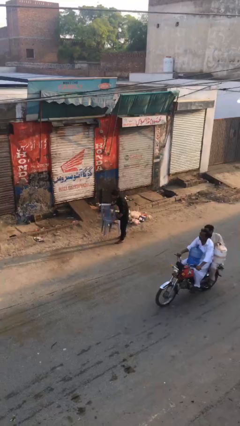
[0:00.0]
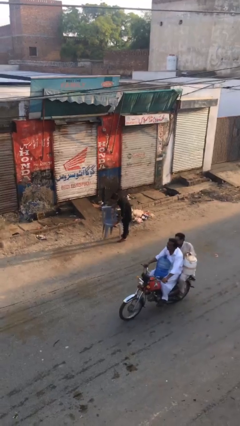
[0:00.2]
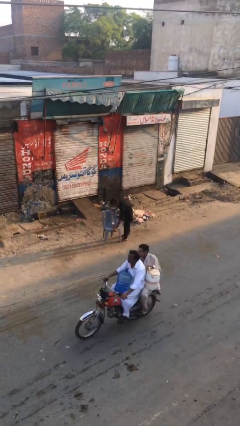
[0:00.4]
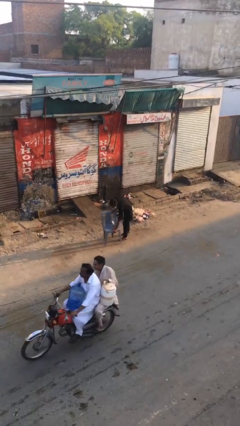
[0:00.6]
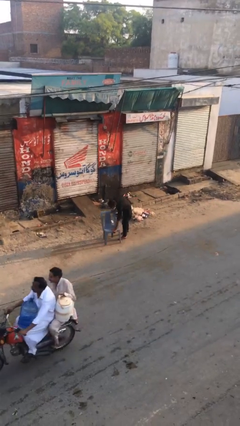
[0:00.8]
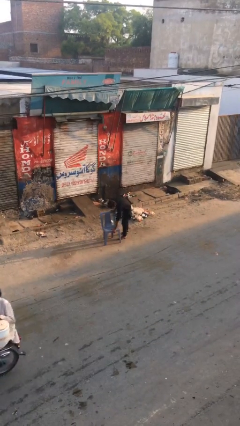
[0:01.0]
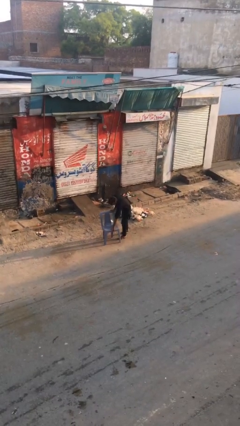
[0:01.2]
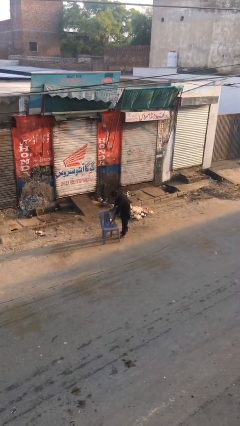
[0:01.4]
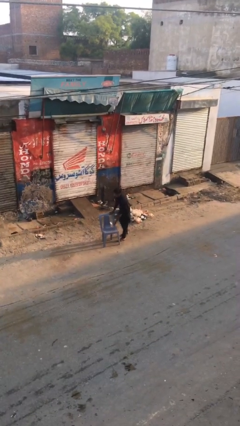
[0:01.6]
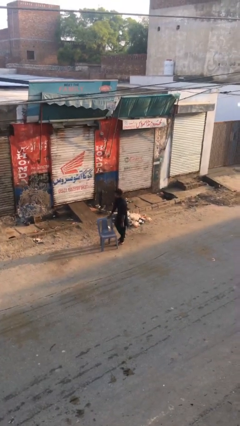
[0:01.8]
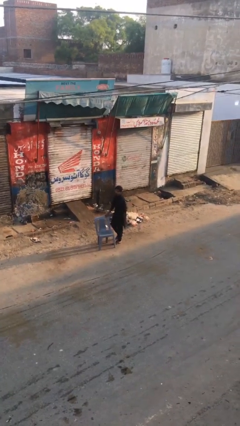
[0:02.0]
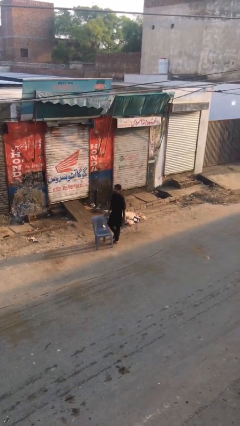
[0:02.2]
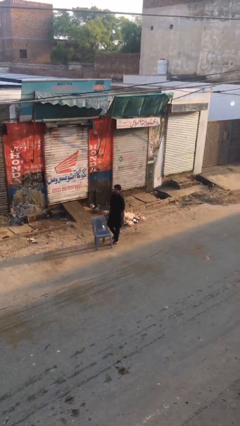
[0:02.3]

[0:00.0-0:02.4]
person puts down object on floor

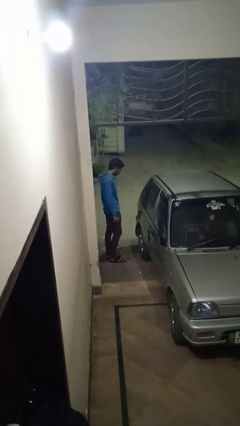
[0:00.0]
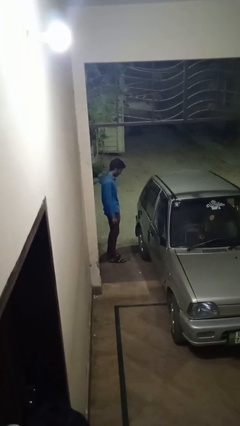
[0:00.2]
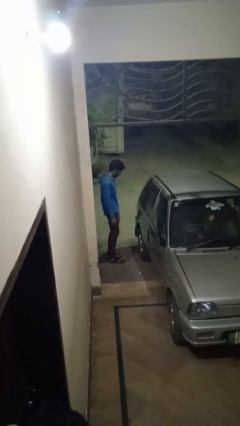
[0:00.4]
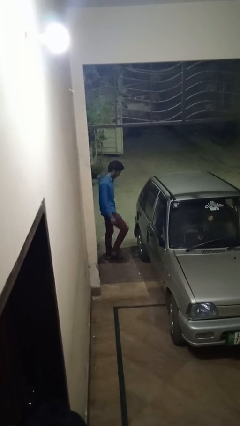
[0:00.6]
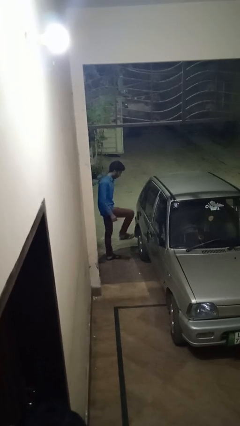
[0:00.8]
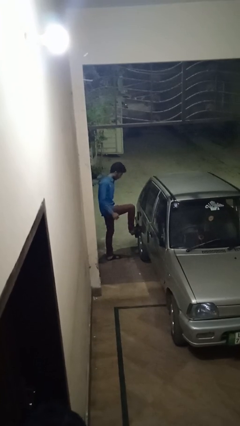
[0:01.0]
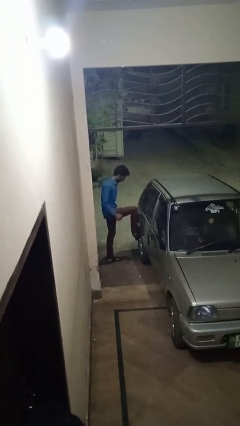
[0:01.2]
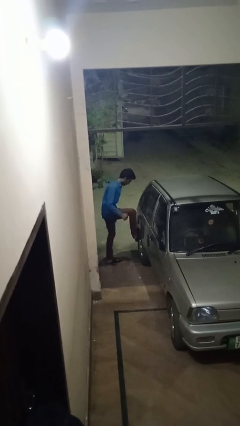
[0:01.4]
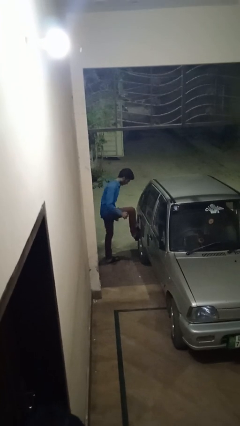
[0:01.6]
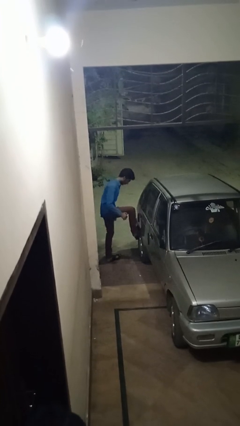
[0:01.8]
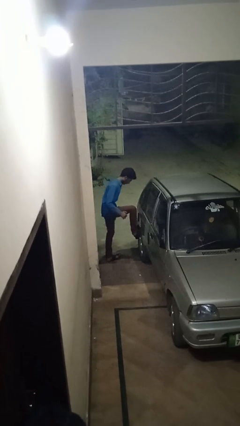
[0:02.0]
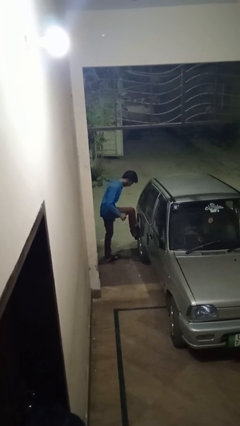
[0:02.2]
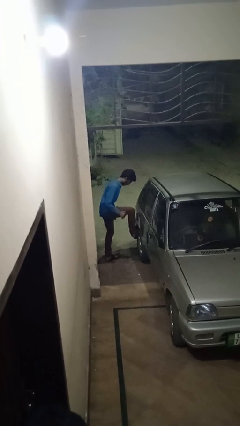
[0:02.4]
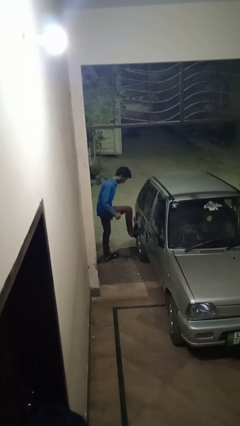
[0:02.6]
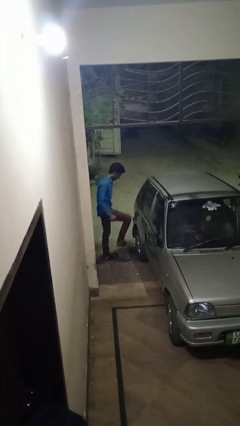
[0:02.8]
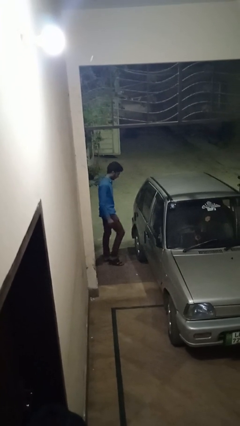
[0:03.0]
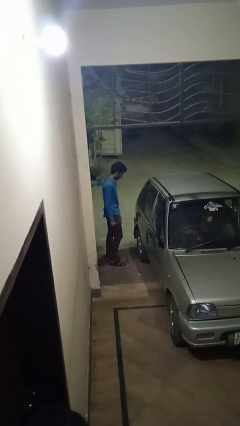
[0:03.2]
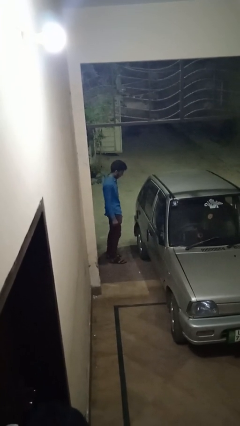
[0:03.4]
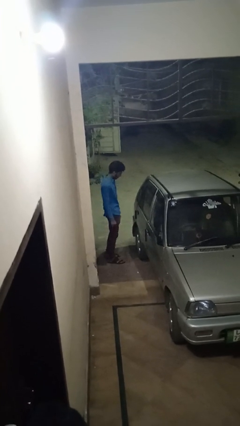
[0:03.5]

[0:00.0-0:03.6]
person kicks car tires

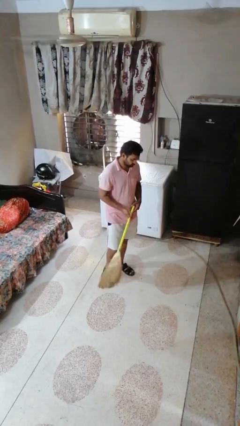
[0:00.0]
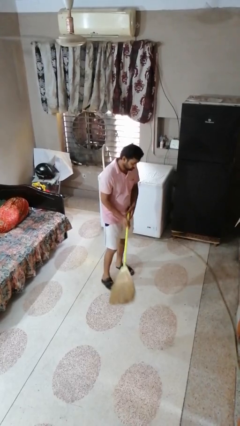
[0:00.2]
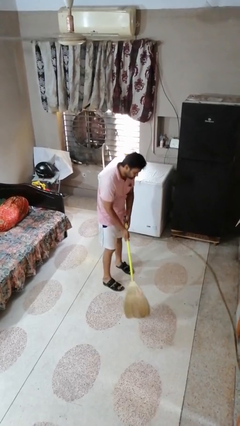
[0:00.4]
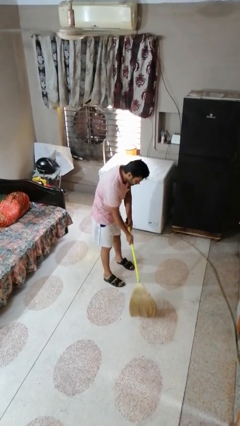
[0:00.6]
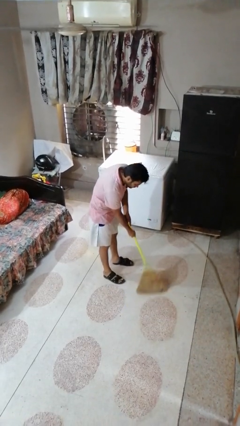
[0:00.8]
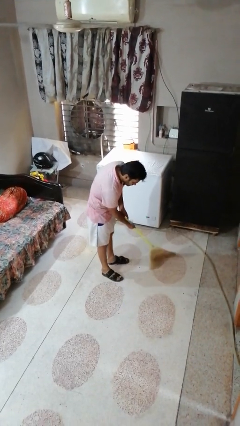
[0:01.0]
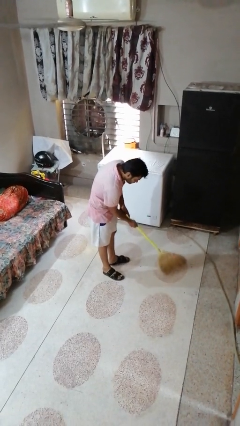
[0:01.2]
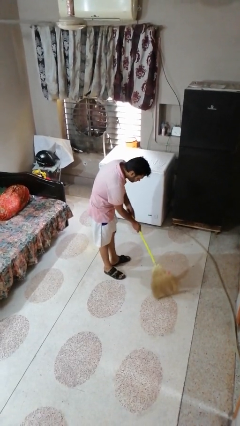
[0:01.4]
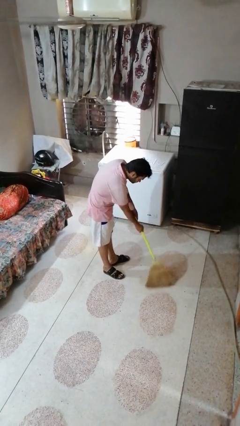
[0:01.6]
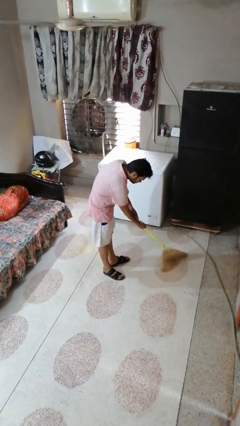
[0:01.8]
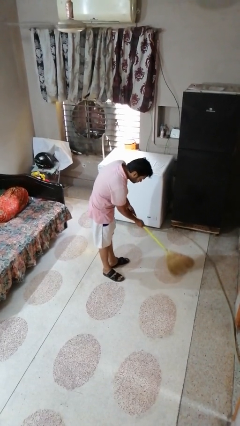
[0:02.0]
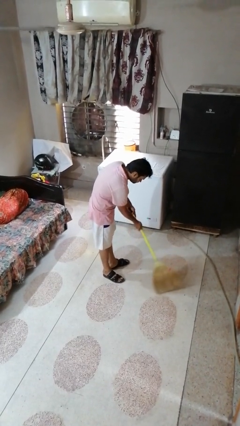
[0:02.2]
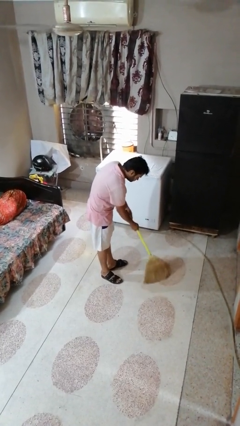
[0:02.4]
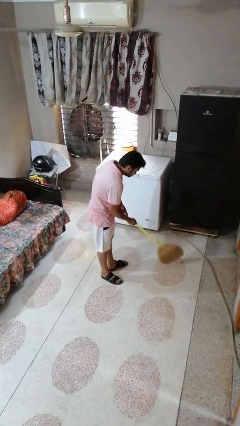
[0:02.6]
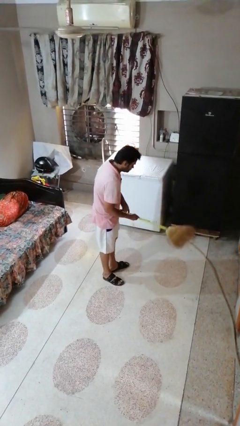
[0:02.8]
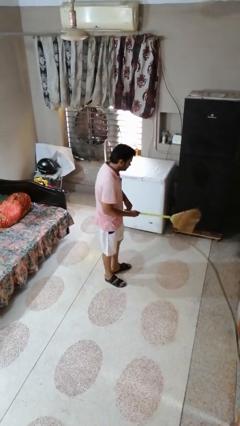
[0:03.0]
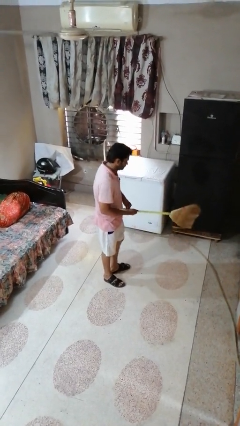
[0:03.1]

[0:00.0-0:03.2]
person sweeps floor

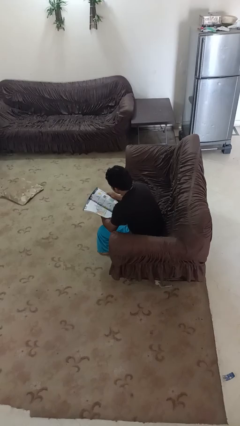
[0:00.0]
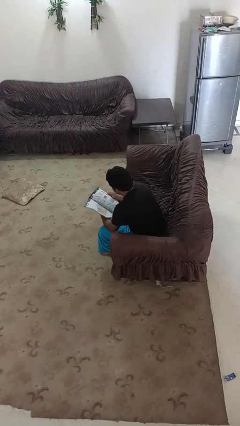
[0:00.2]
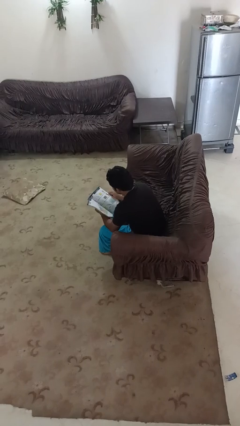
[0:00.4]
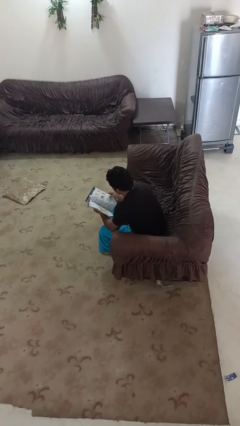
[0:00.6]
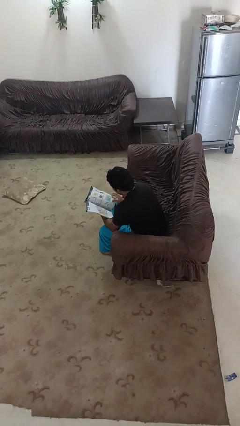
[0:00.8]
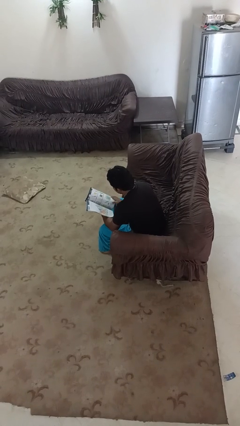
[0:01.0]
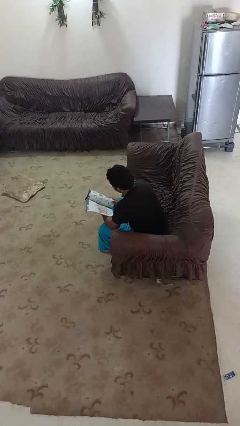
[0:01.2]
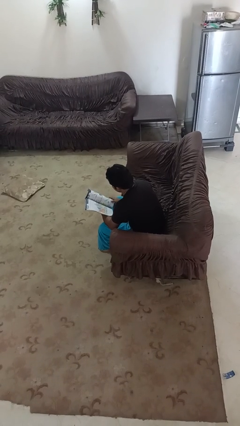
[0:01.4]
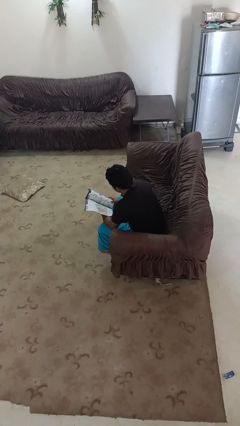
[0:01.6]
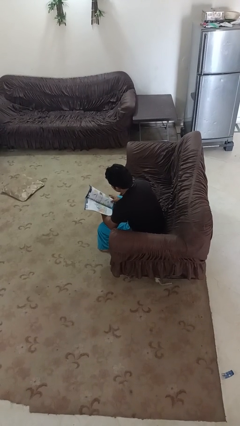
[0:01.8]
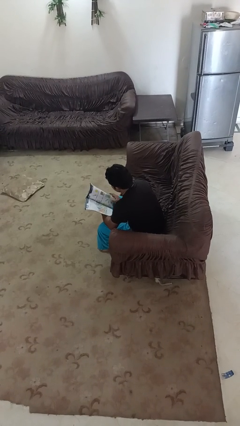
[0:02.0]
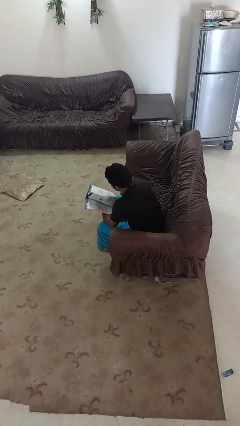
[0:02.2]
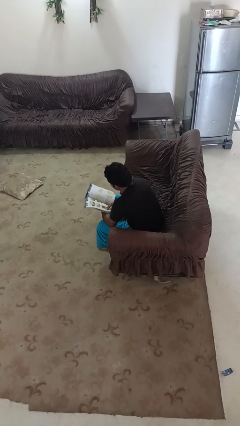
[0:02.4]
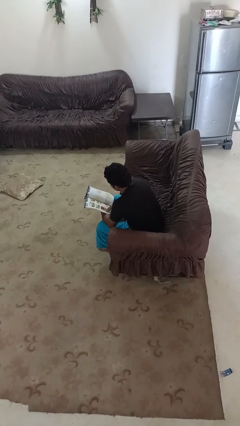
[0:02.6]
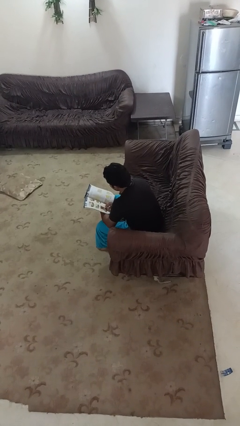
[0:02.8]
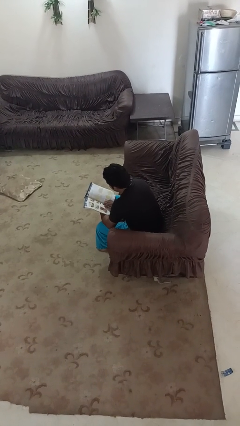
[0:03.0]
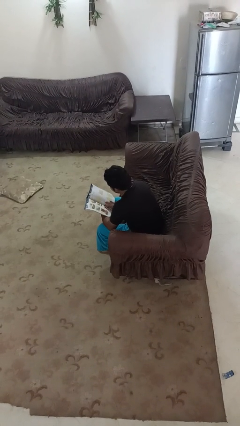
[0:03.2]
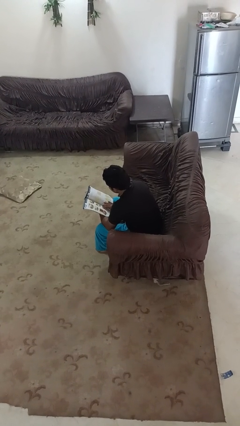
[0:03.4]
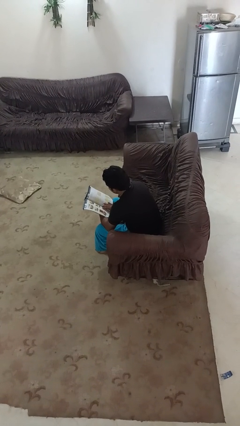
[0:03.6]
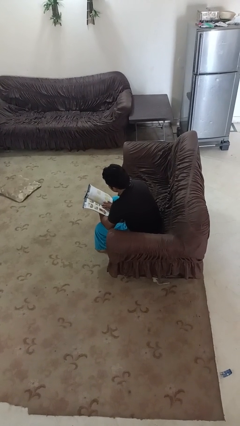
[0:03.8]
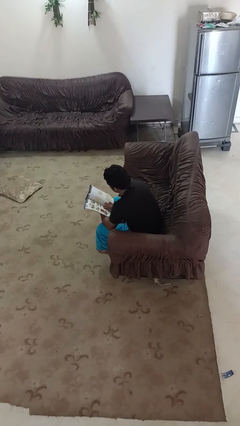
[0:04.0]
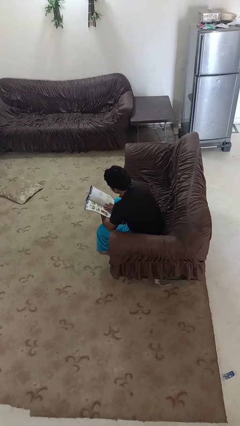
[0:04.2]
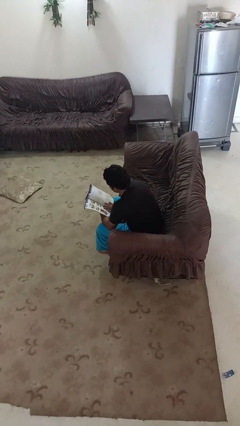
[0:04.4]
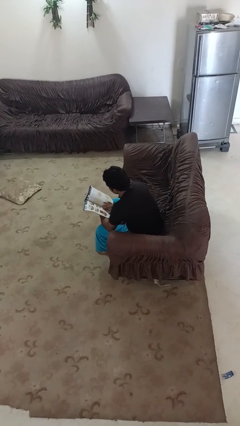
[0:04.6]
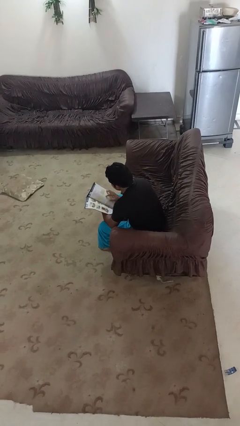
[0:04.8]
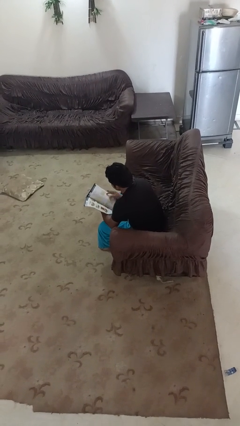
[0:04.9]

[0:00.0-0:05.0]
person reads book

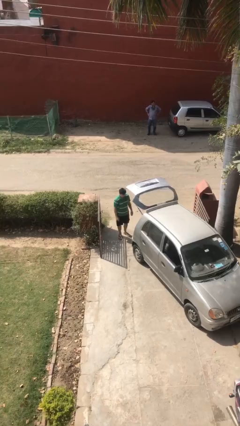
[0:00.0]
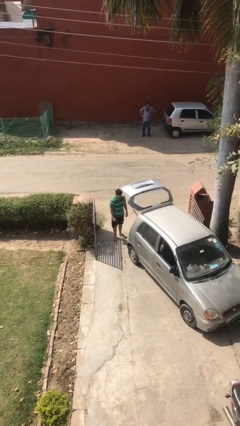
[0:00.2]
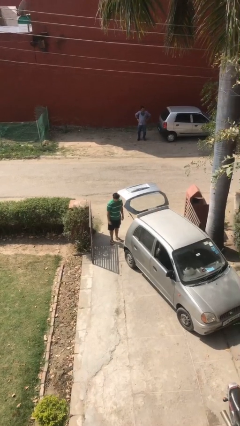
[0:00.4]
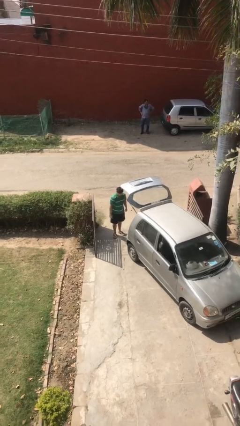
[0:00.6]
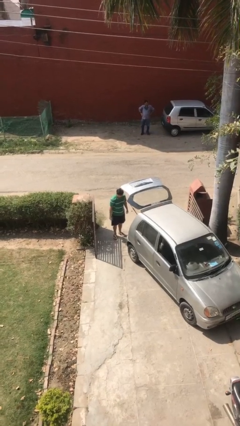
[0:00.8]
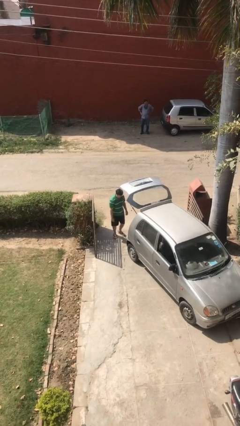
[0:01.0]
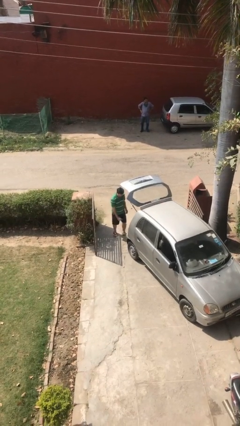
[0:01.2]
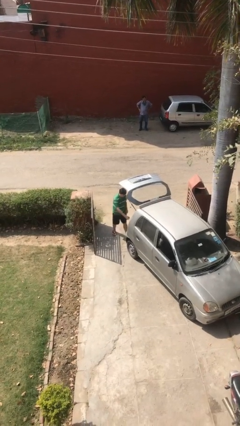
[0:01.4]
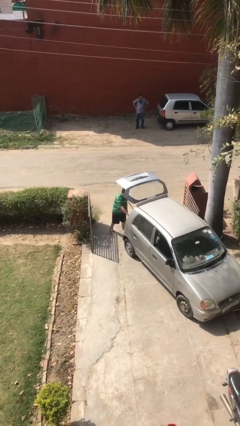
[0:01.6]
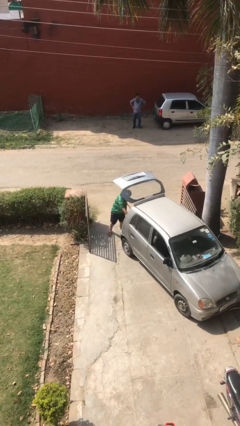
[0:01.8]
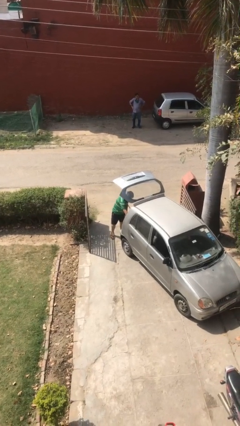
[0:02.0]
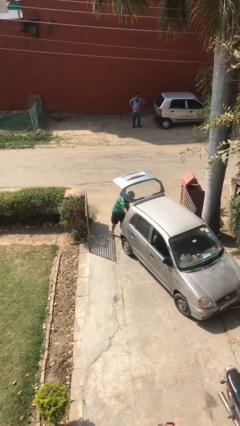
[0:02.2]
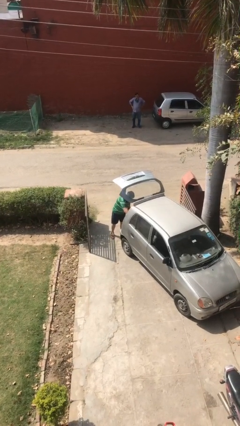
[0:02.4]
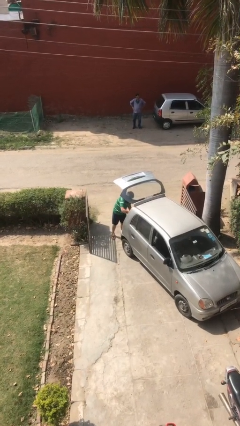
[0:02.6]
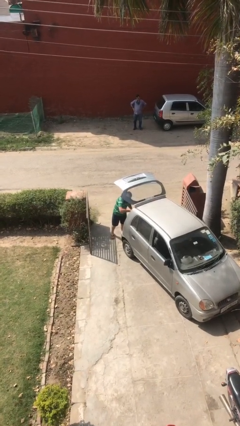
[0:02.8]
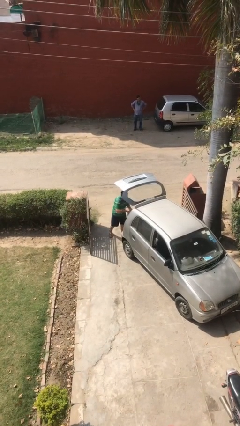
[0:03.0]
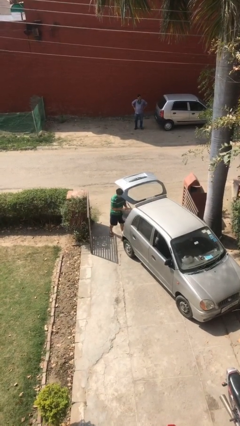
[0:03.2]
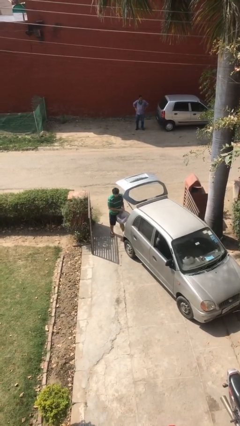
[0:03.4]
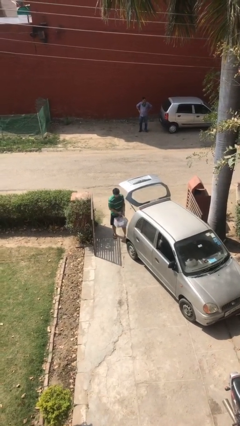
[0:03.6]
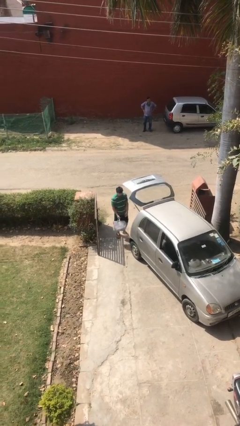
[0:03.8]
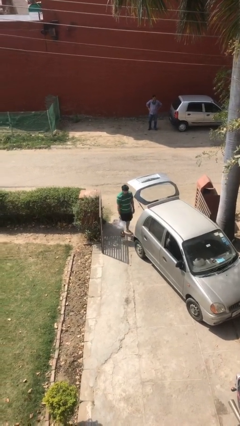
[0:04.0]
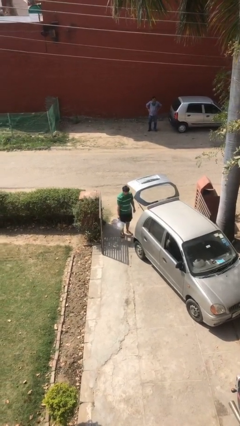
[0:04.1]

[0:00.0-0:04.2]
person unloads car
